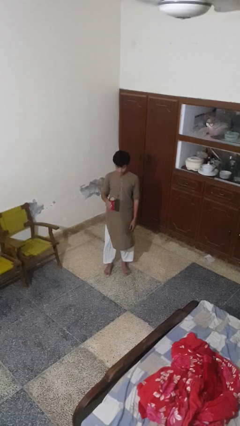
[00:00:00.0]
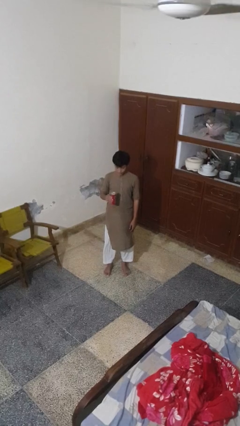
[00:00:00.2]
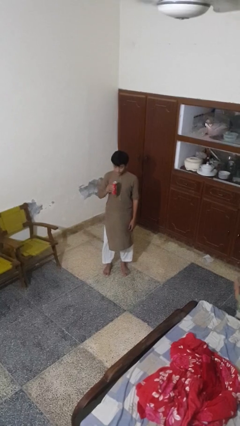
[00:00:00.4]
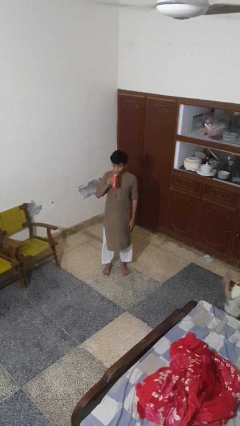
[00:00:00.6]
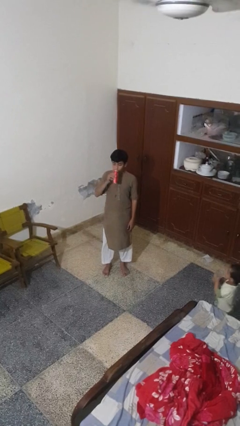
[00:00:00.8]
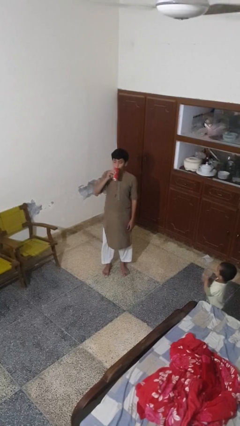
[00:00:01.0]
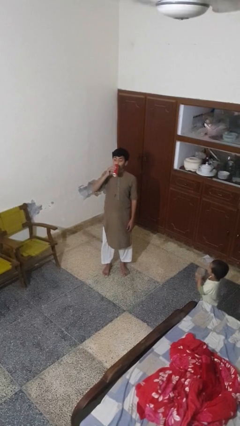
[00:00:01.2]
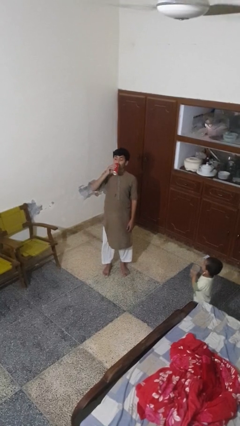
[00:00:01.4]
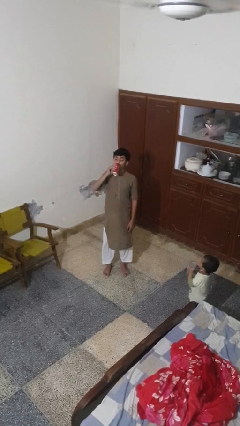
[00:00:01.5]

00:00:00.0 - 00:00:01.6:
person drinks from beverage can

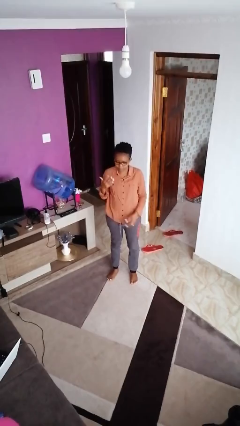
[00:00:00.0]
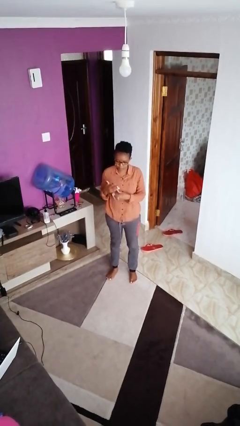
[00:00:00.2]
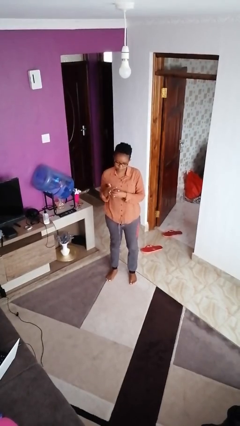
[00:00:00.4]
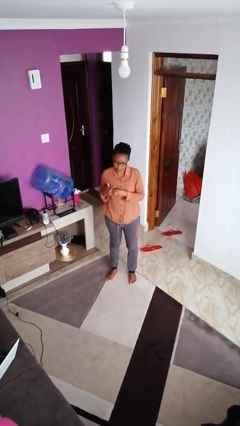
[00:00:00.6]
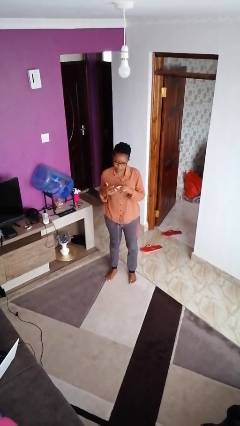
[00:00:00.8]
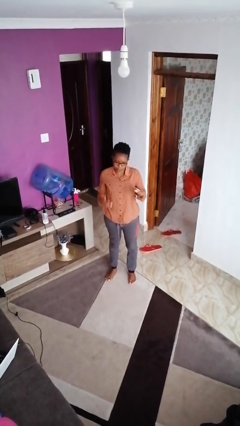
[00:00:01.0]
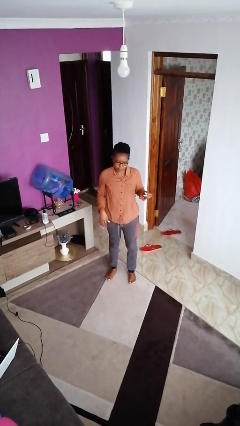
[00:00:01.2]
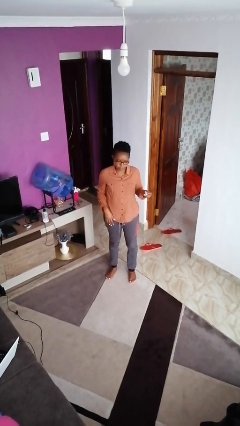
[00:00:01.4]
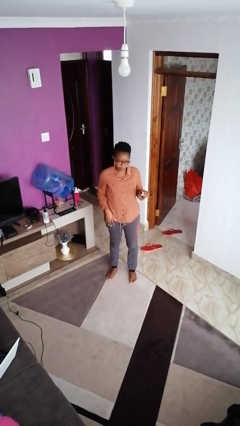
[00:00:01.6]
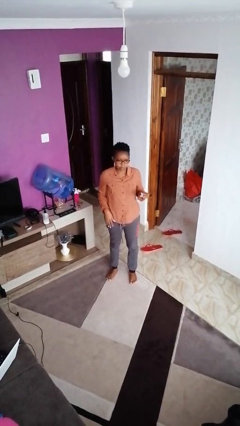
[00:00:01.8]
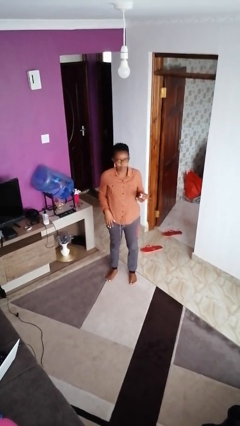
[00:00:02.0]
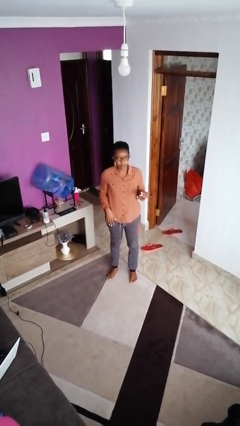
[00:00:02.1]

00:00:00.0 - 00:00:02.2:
person takes off ring

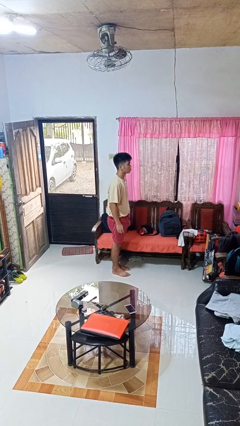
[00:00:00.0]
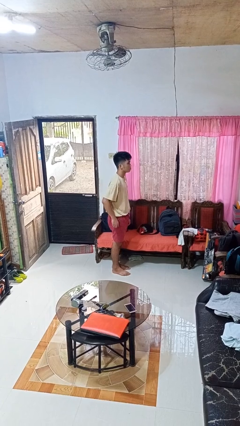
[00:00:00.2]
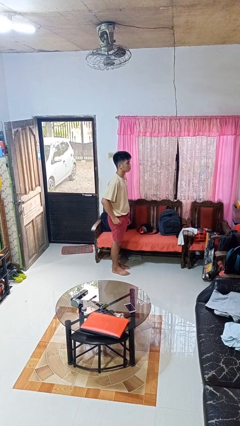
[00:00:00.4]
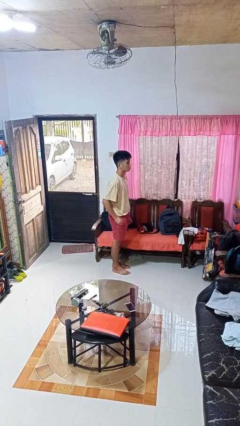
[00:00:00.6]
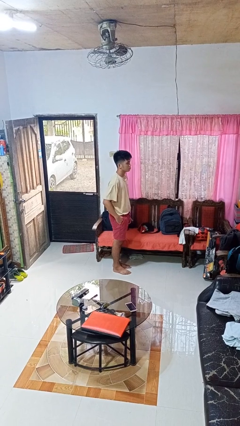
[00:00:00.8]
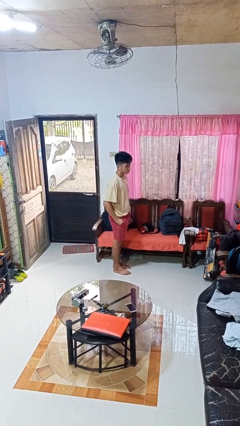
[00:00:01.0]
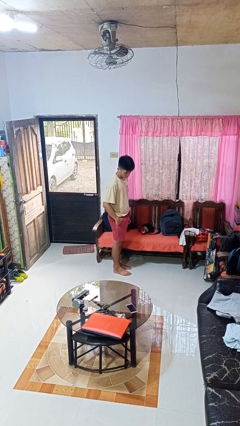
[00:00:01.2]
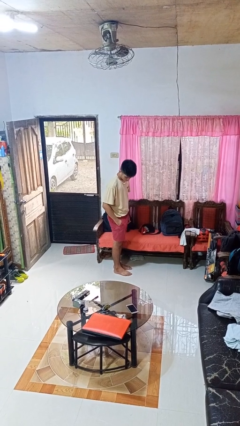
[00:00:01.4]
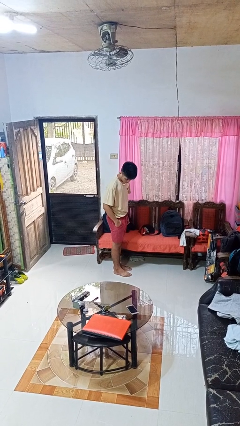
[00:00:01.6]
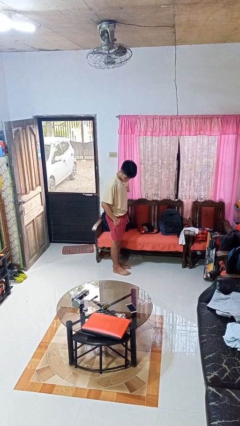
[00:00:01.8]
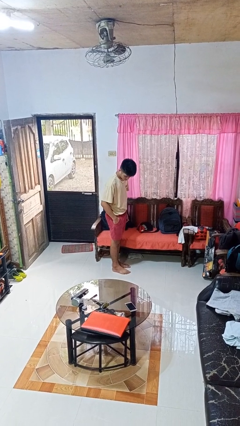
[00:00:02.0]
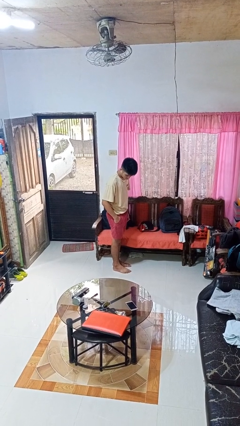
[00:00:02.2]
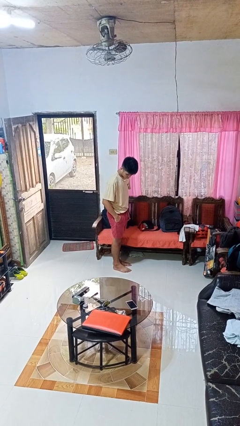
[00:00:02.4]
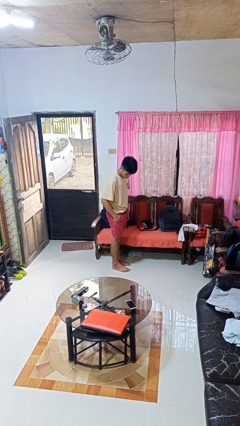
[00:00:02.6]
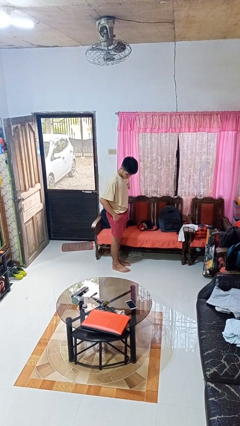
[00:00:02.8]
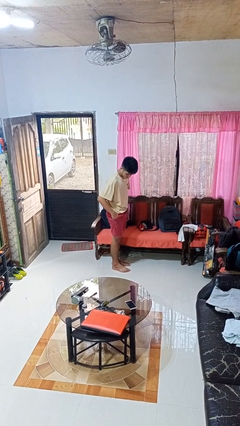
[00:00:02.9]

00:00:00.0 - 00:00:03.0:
person puts hands in back pockets

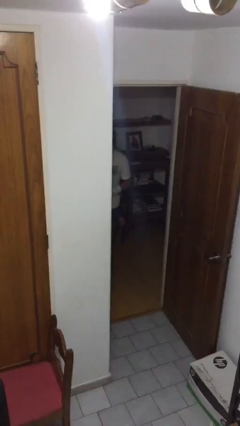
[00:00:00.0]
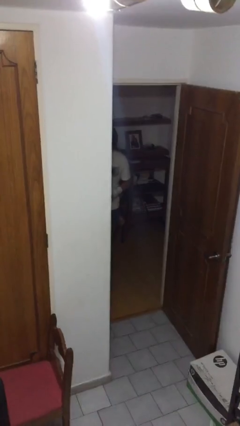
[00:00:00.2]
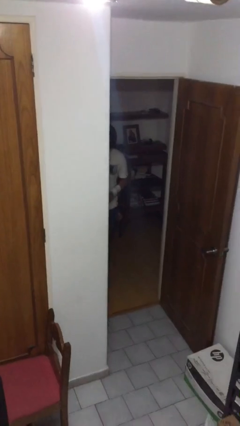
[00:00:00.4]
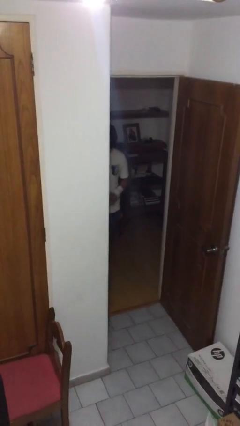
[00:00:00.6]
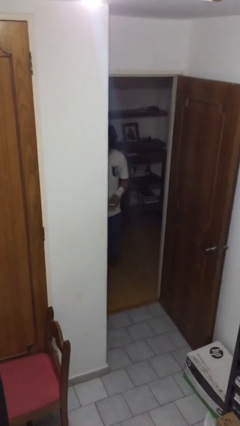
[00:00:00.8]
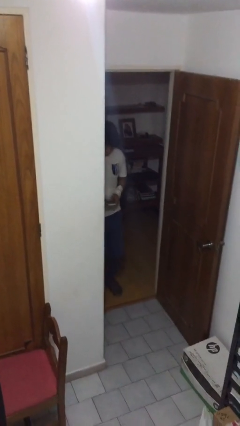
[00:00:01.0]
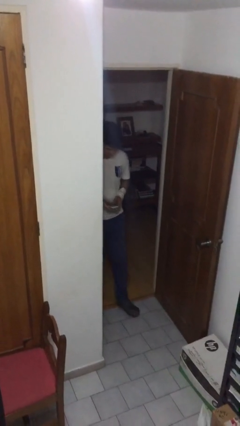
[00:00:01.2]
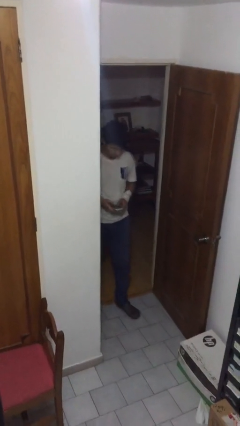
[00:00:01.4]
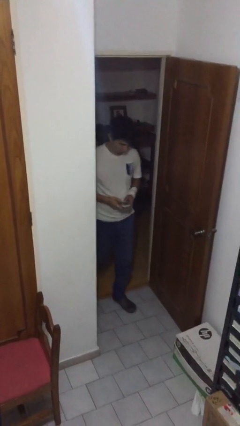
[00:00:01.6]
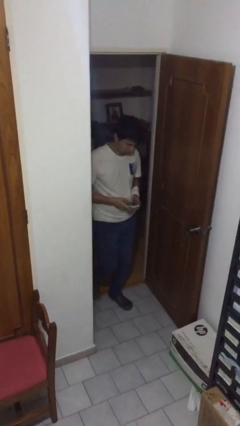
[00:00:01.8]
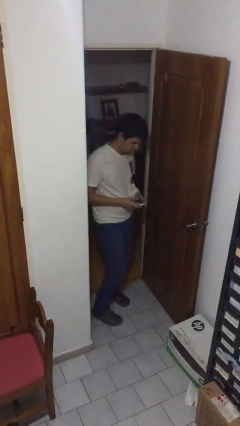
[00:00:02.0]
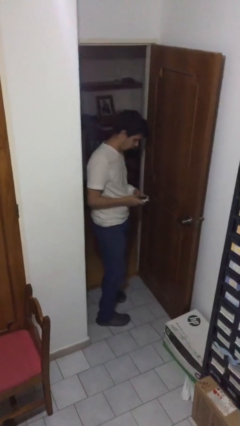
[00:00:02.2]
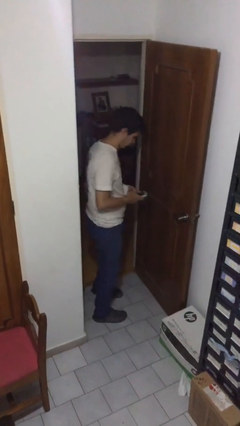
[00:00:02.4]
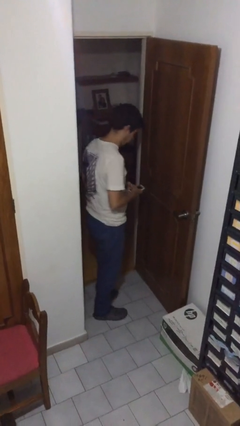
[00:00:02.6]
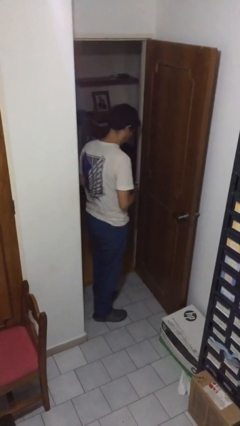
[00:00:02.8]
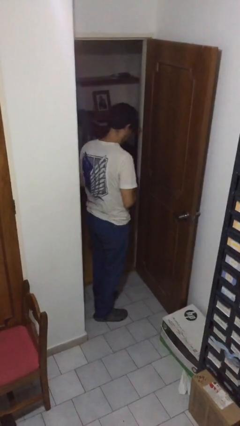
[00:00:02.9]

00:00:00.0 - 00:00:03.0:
person enters scene through structure

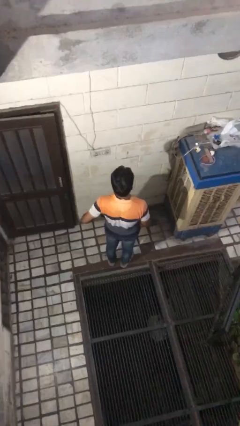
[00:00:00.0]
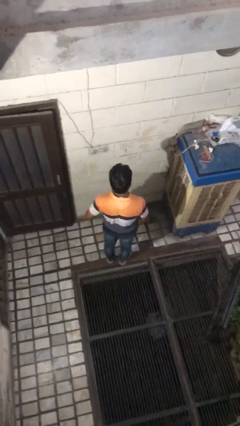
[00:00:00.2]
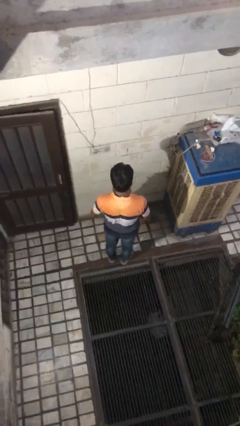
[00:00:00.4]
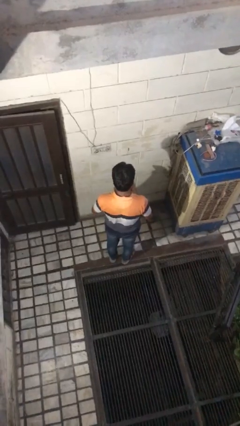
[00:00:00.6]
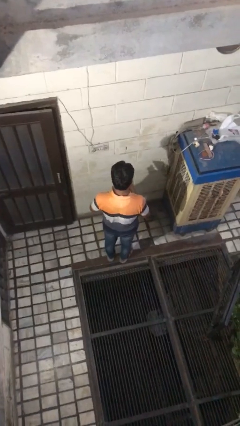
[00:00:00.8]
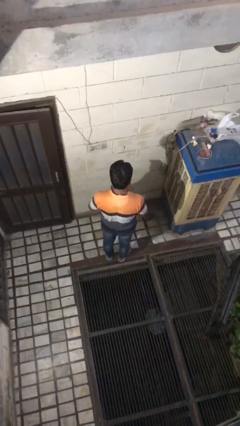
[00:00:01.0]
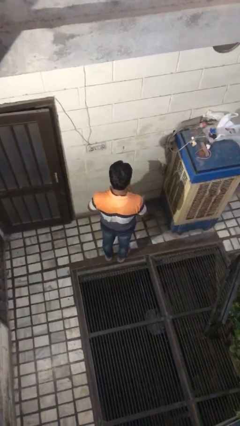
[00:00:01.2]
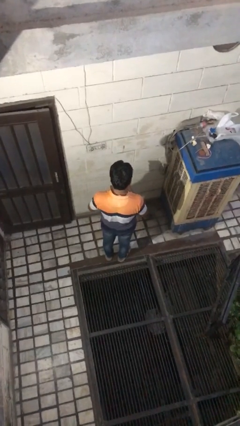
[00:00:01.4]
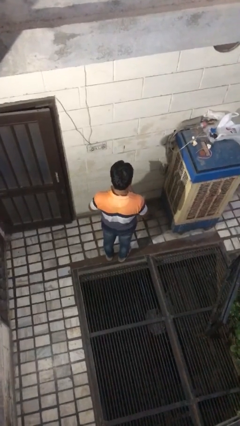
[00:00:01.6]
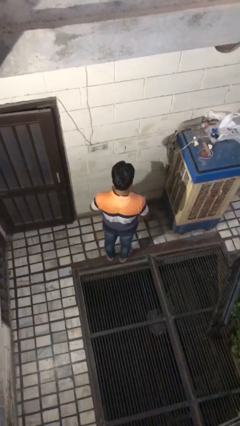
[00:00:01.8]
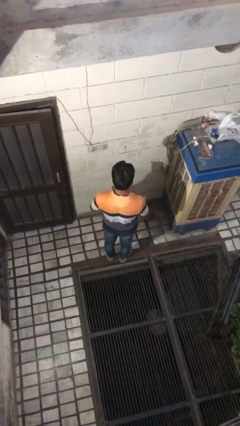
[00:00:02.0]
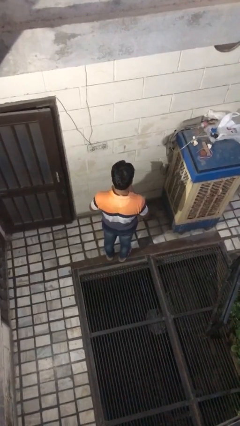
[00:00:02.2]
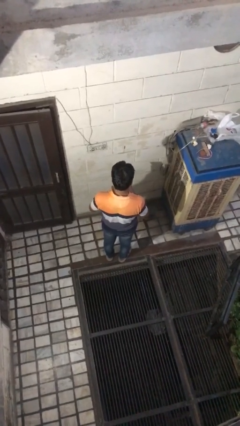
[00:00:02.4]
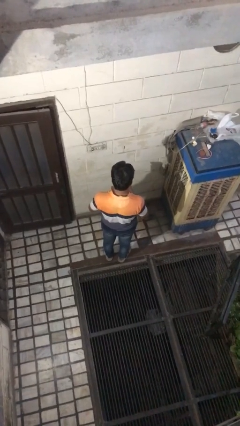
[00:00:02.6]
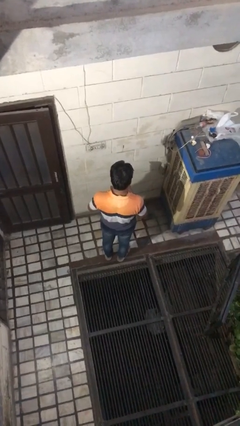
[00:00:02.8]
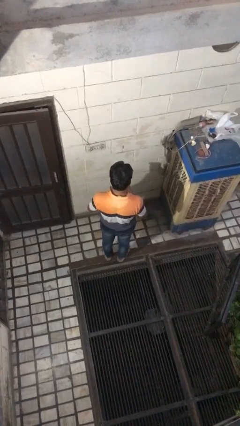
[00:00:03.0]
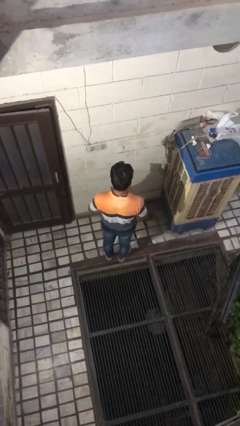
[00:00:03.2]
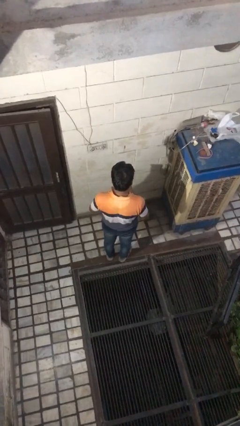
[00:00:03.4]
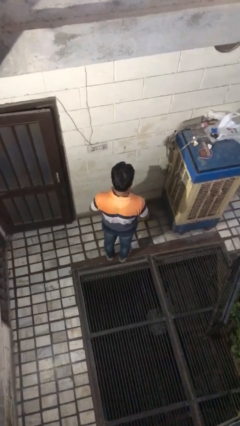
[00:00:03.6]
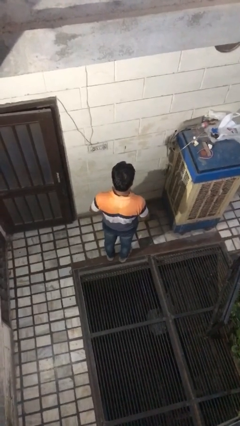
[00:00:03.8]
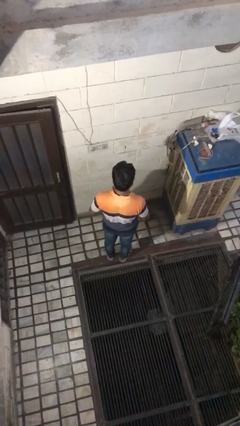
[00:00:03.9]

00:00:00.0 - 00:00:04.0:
person takes phone from pocket

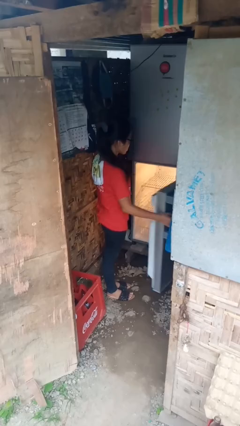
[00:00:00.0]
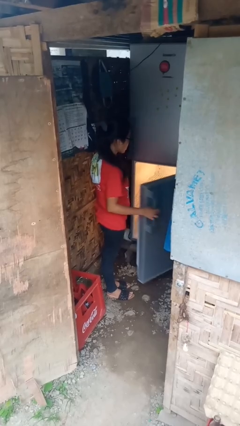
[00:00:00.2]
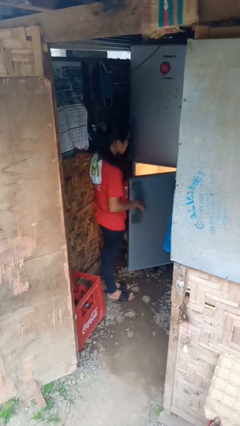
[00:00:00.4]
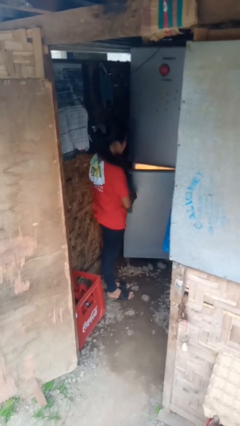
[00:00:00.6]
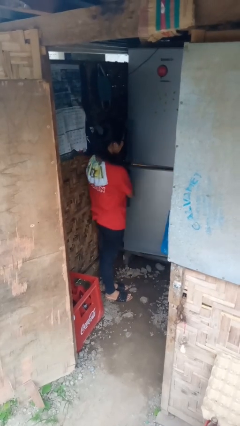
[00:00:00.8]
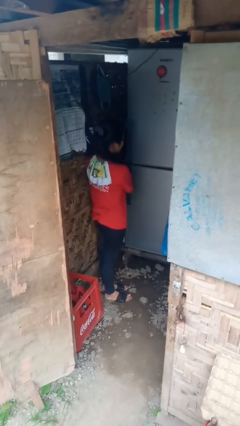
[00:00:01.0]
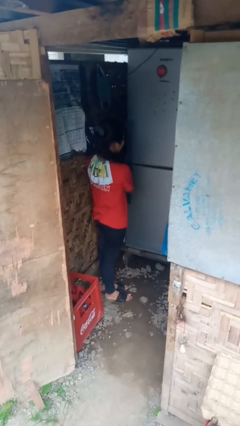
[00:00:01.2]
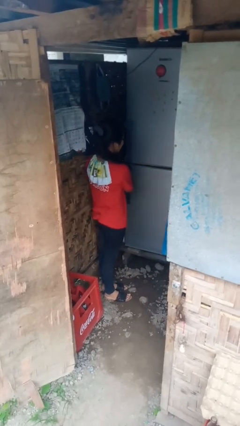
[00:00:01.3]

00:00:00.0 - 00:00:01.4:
person closes refrigerator

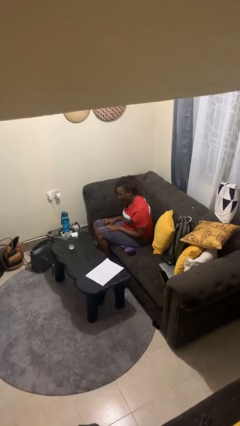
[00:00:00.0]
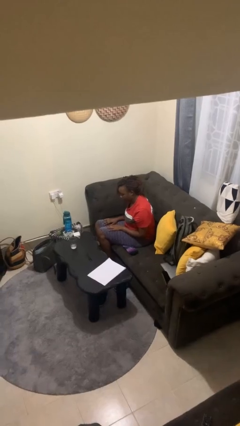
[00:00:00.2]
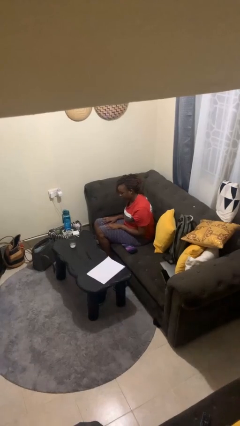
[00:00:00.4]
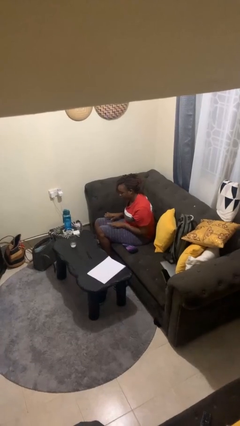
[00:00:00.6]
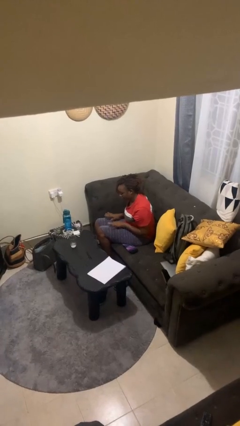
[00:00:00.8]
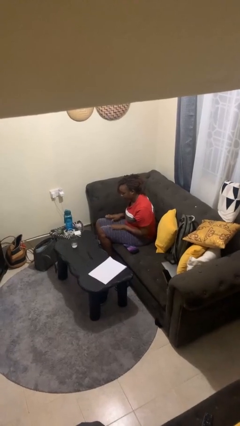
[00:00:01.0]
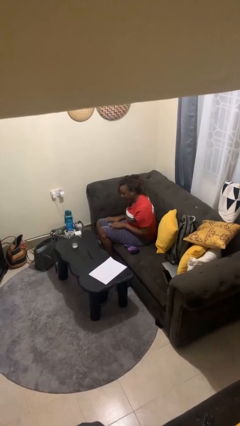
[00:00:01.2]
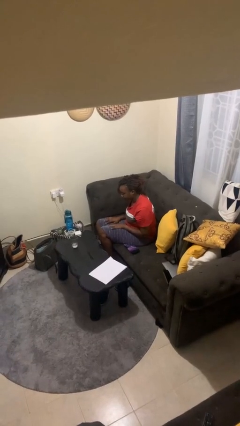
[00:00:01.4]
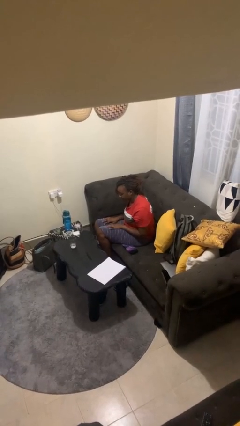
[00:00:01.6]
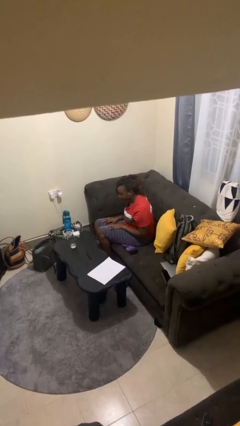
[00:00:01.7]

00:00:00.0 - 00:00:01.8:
person slaps hands on thighs
